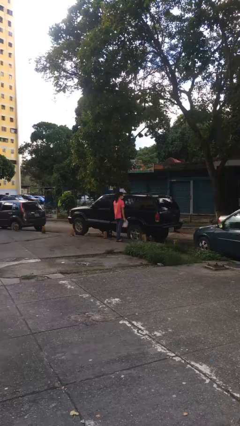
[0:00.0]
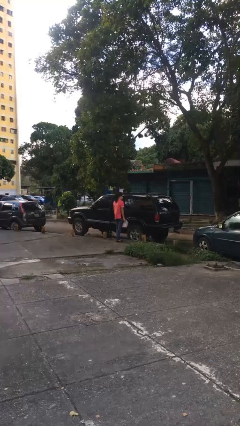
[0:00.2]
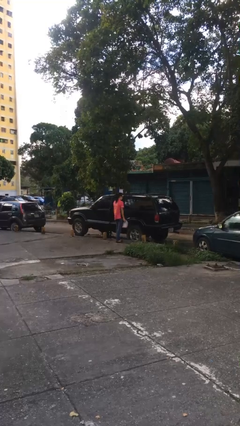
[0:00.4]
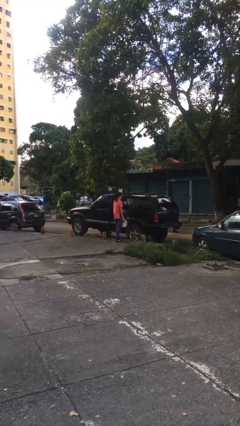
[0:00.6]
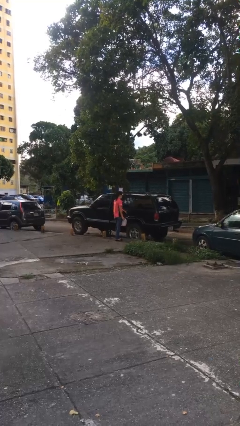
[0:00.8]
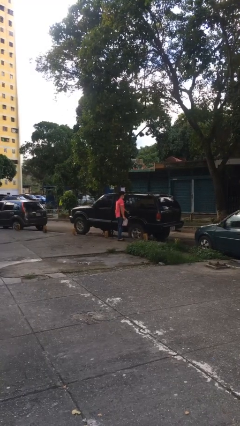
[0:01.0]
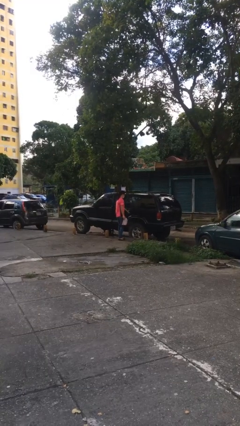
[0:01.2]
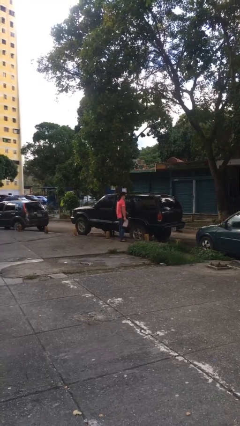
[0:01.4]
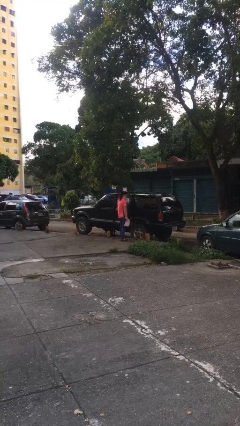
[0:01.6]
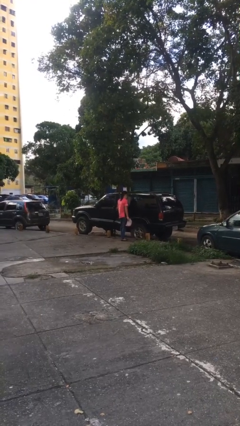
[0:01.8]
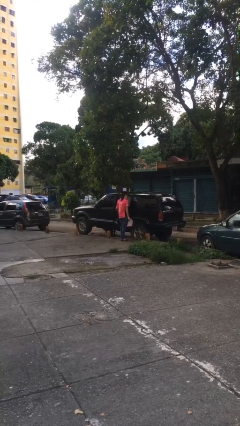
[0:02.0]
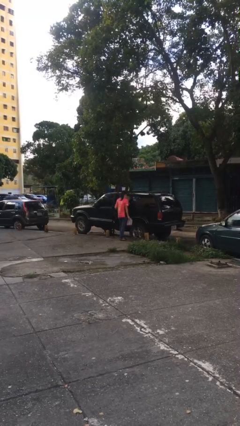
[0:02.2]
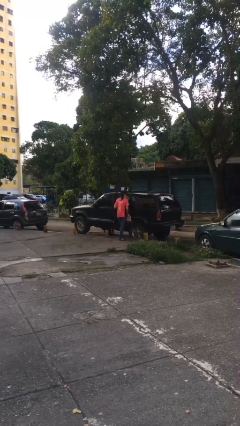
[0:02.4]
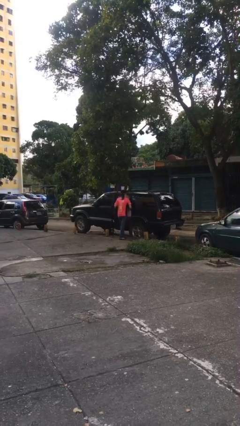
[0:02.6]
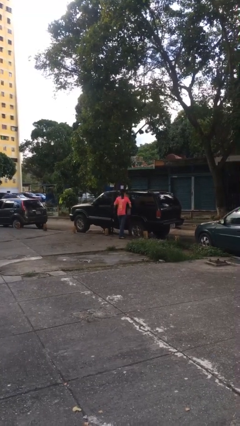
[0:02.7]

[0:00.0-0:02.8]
person opens car door

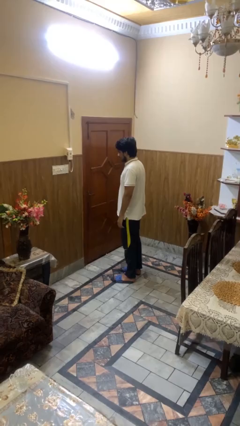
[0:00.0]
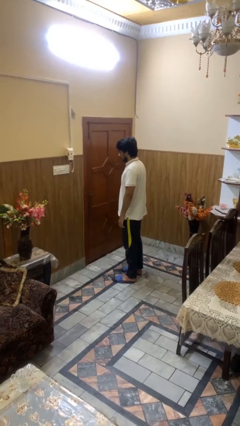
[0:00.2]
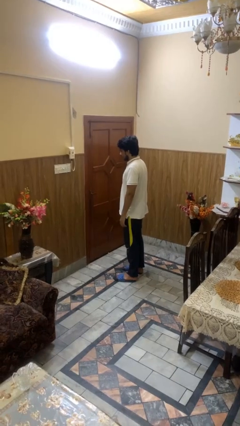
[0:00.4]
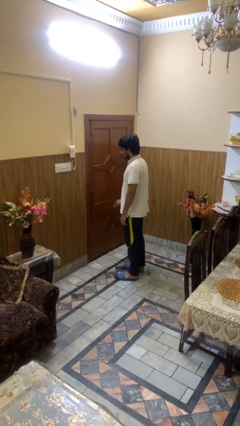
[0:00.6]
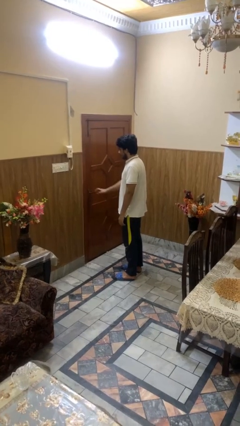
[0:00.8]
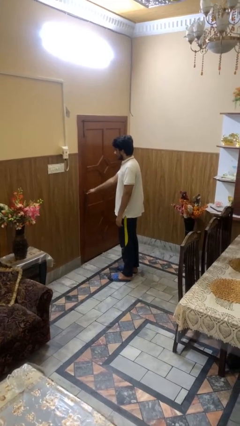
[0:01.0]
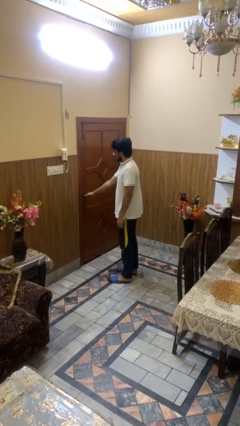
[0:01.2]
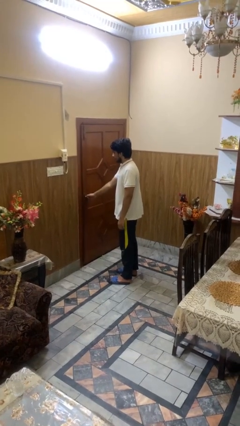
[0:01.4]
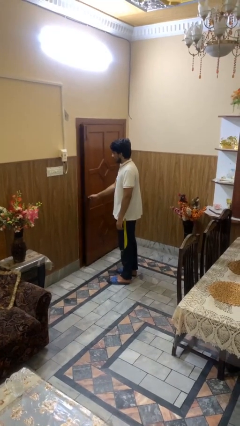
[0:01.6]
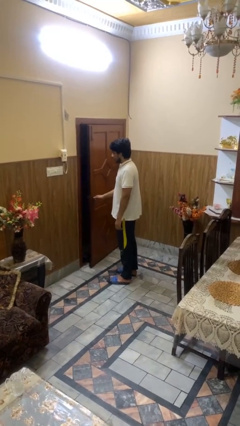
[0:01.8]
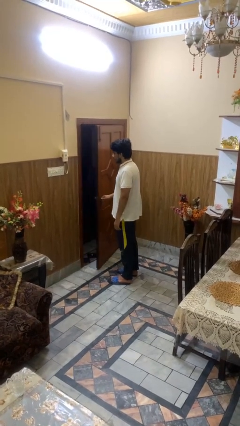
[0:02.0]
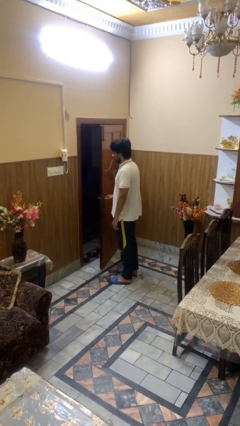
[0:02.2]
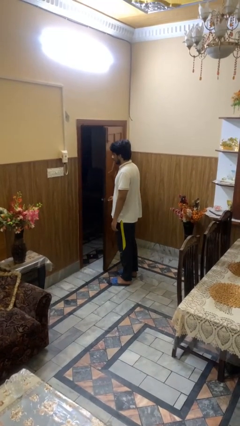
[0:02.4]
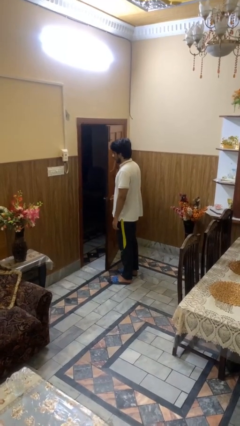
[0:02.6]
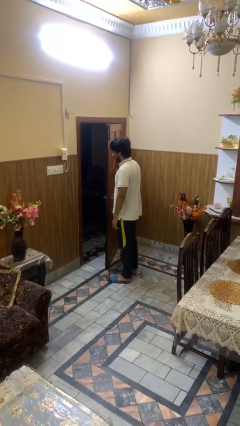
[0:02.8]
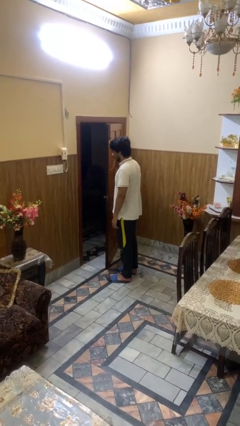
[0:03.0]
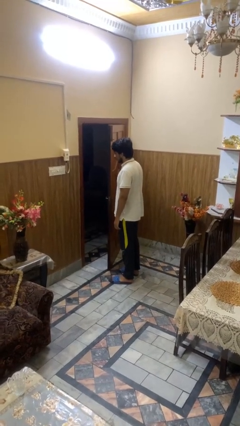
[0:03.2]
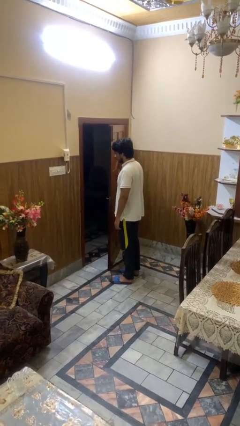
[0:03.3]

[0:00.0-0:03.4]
person opens facility door

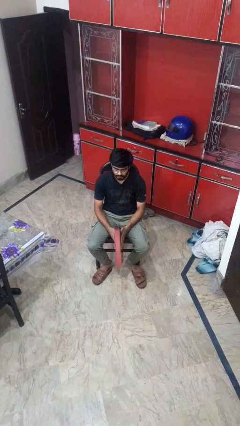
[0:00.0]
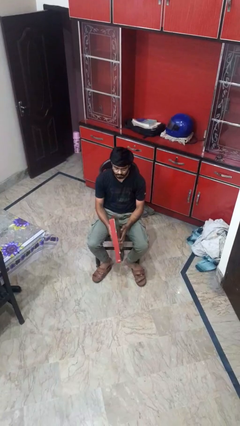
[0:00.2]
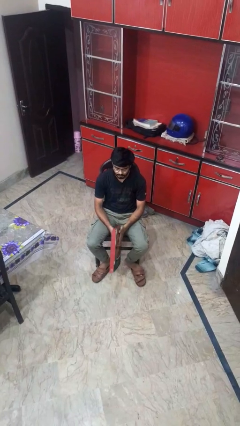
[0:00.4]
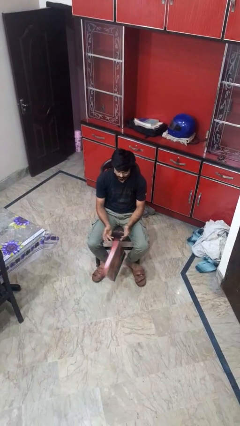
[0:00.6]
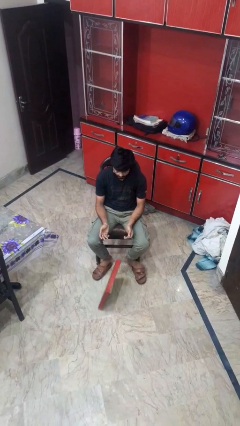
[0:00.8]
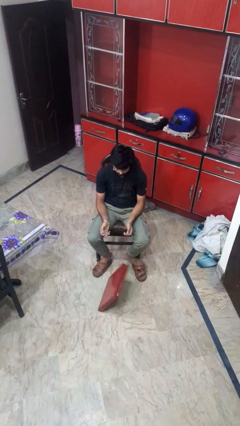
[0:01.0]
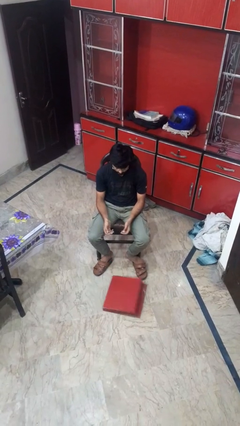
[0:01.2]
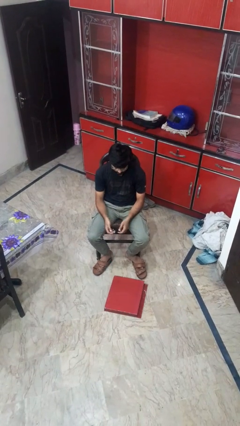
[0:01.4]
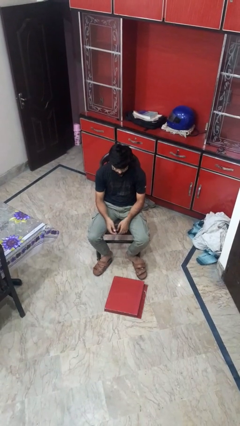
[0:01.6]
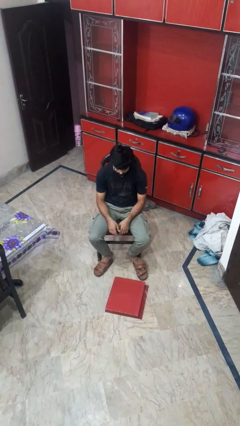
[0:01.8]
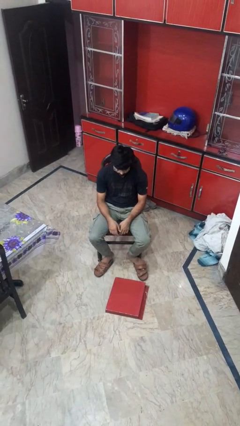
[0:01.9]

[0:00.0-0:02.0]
person drops object

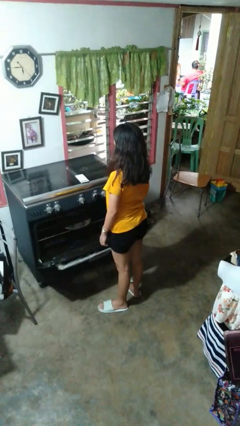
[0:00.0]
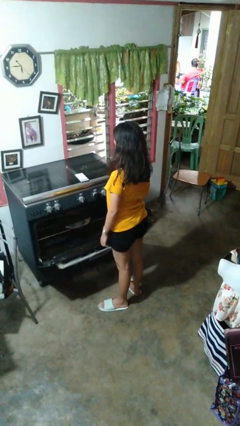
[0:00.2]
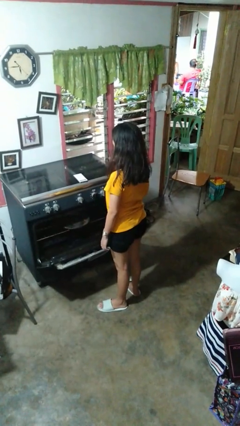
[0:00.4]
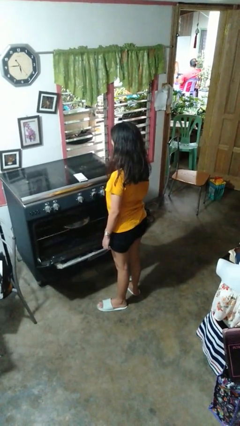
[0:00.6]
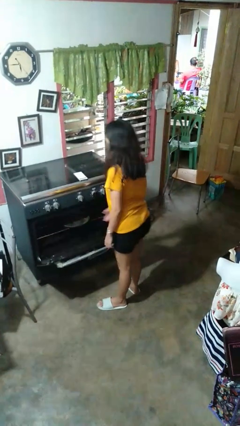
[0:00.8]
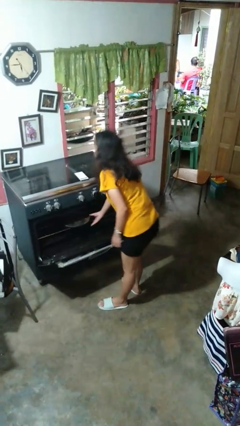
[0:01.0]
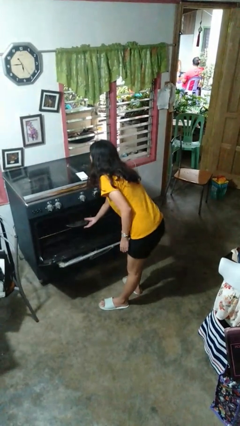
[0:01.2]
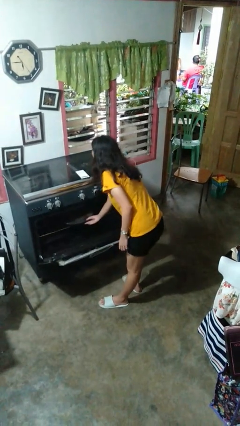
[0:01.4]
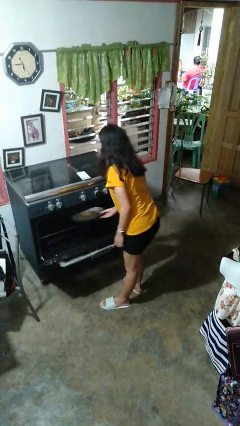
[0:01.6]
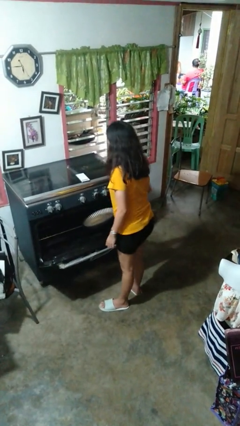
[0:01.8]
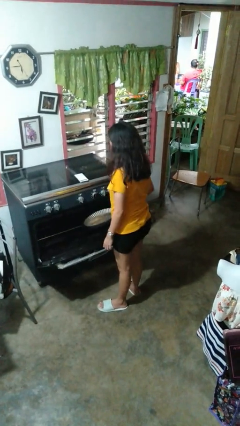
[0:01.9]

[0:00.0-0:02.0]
person takes object from oven

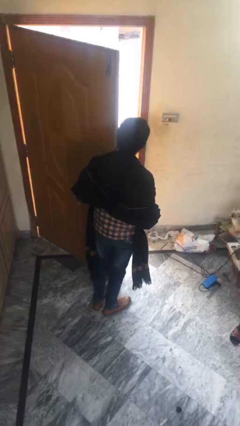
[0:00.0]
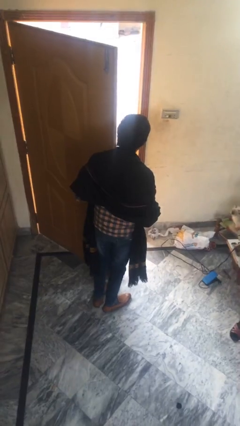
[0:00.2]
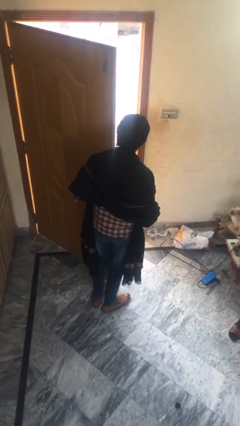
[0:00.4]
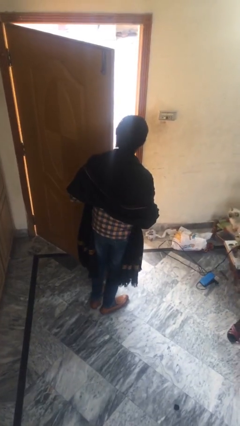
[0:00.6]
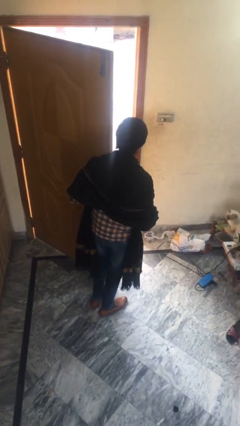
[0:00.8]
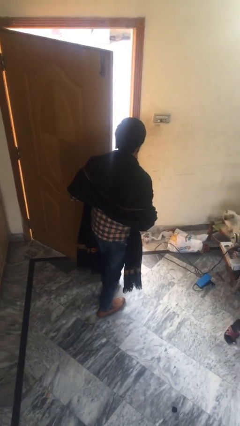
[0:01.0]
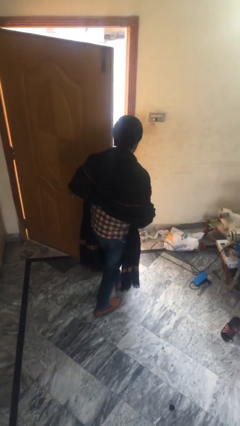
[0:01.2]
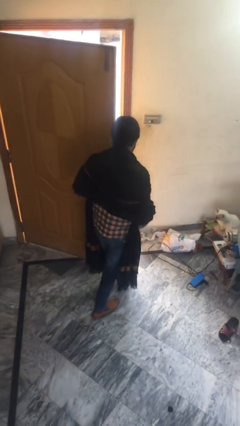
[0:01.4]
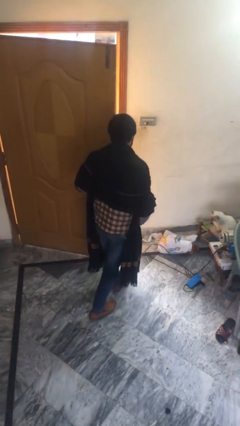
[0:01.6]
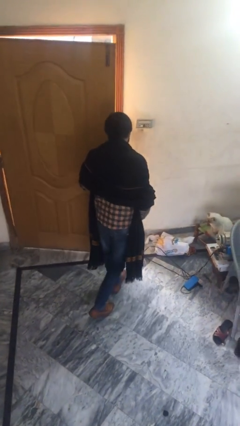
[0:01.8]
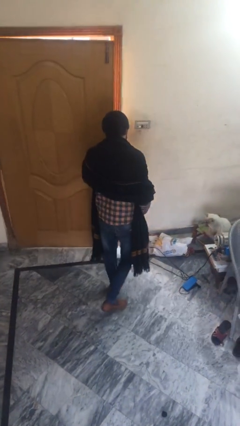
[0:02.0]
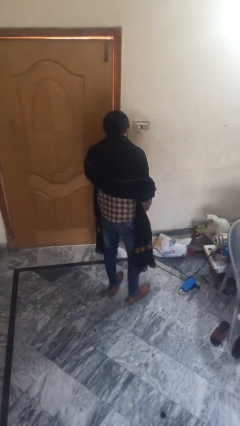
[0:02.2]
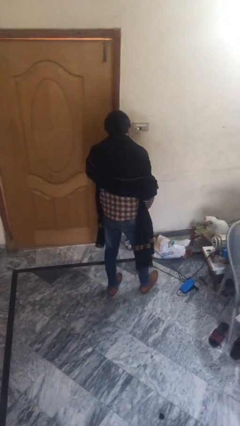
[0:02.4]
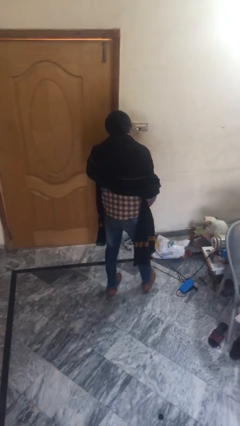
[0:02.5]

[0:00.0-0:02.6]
person closes facility door

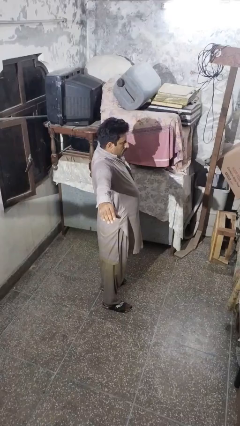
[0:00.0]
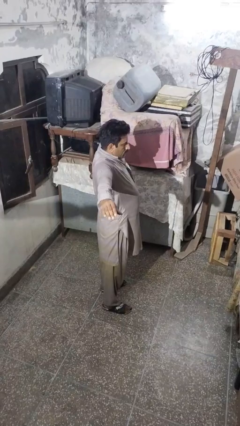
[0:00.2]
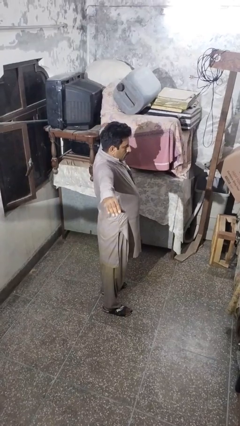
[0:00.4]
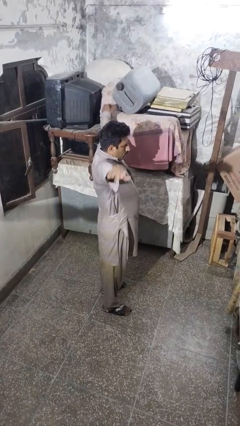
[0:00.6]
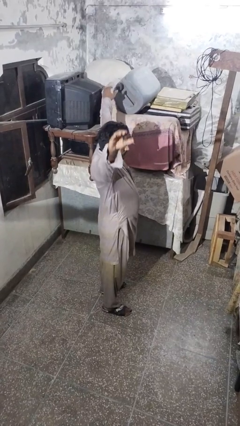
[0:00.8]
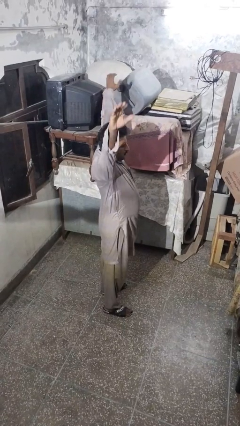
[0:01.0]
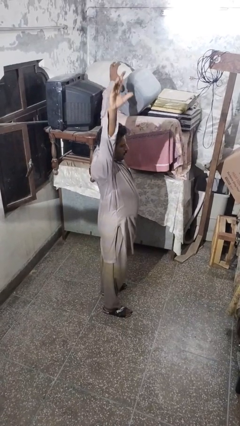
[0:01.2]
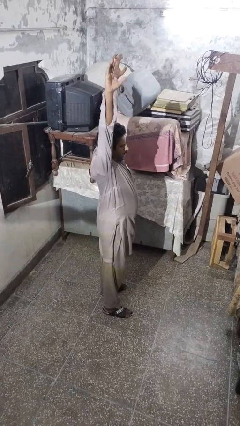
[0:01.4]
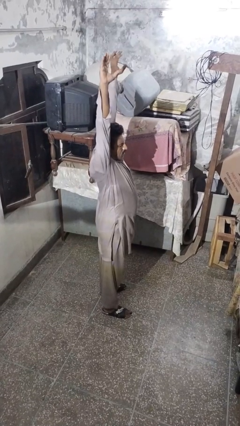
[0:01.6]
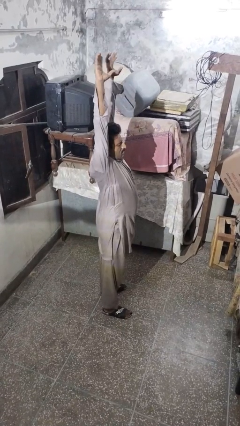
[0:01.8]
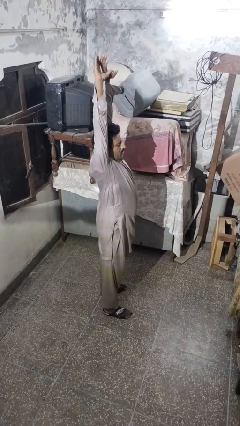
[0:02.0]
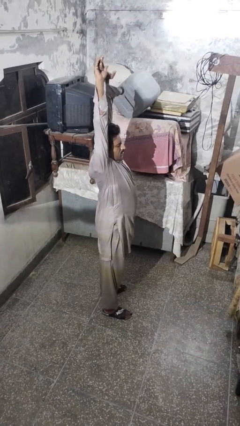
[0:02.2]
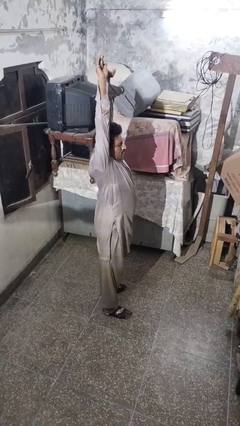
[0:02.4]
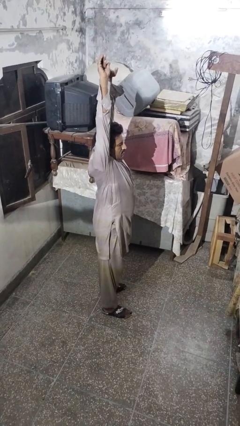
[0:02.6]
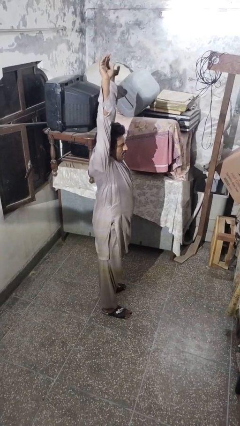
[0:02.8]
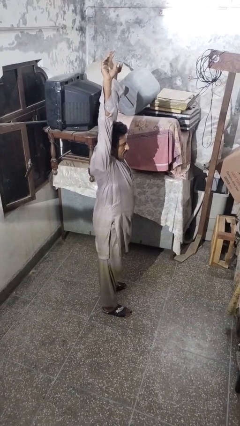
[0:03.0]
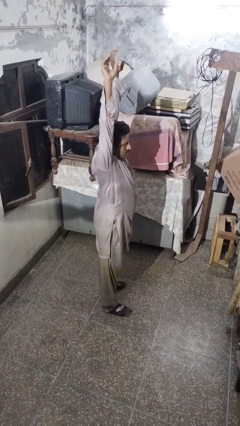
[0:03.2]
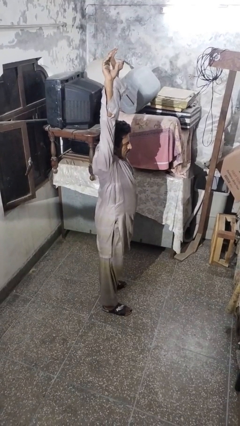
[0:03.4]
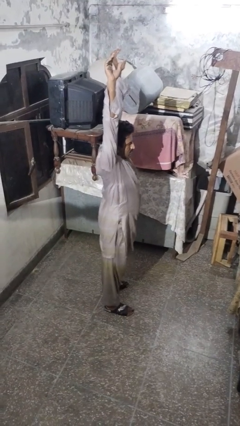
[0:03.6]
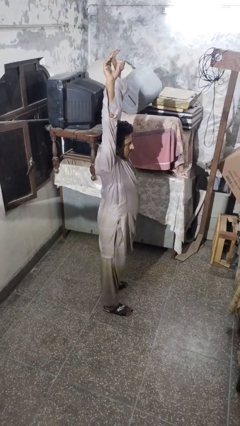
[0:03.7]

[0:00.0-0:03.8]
person stretches arms over head

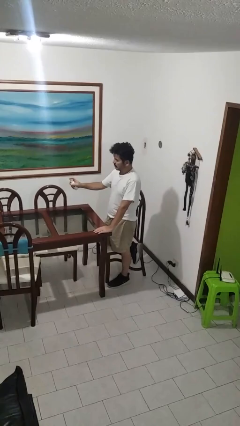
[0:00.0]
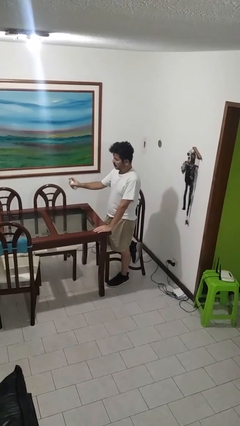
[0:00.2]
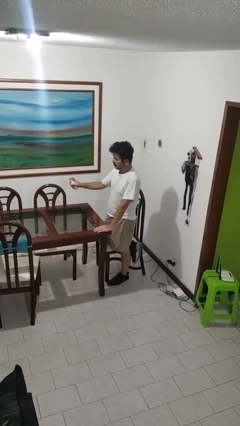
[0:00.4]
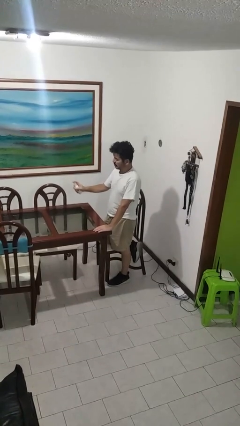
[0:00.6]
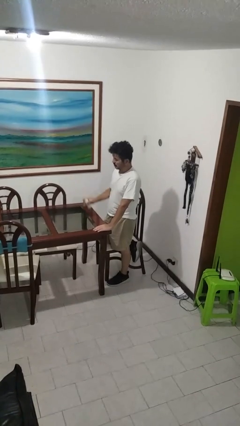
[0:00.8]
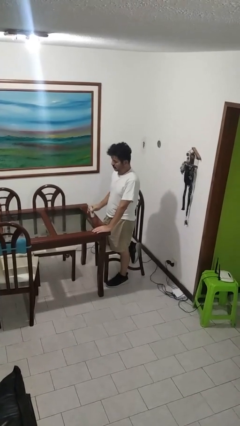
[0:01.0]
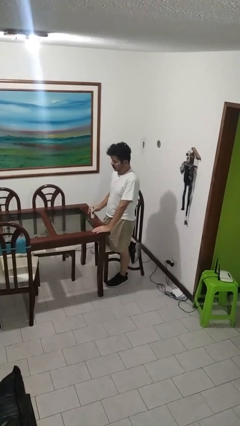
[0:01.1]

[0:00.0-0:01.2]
person sprays from bottle
